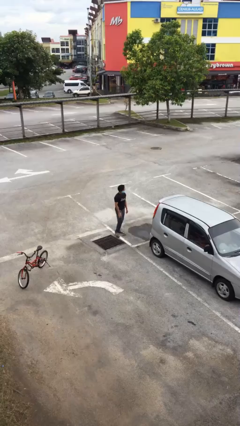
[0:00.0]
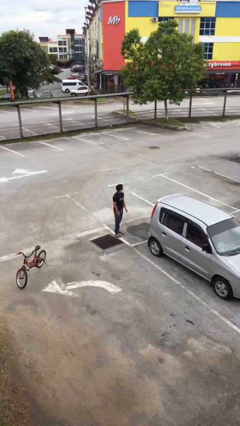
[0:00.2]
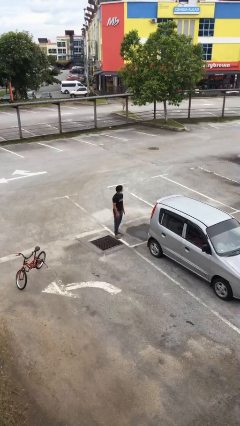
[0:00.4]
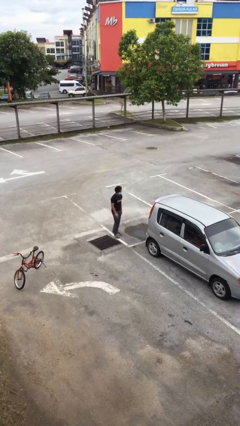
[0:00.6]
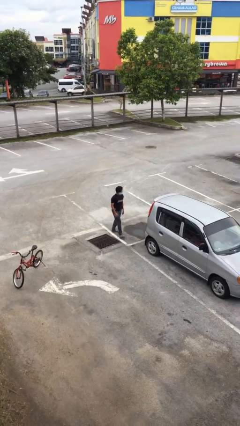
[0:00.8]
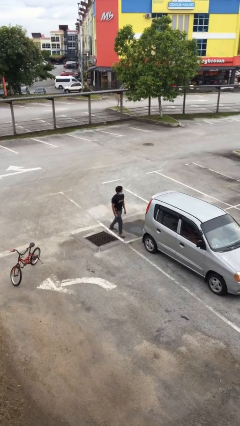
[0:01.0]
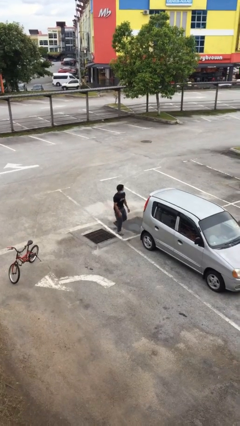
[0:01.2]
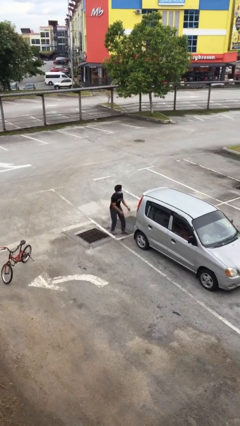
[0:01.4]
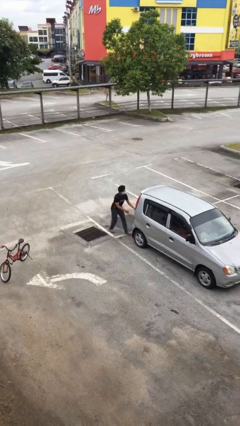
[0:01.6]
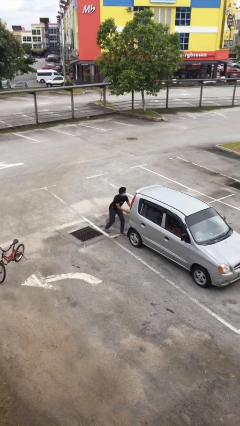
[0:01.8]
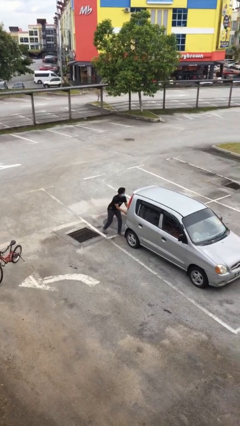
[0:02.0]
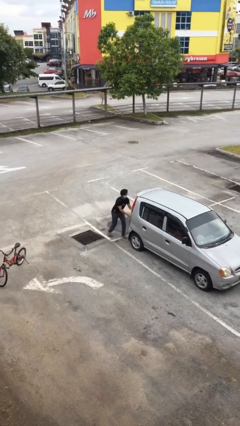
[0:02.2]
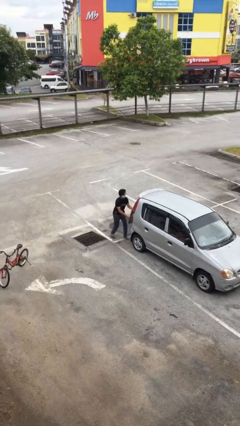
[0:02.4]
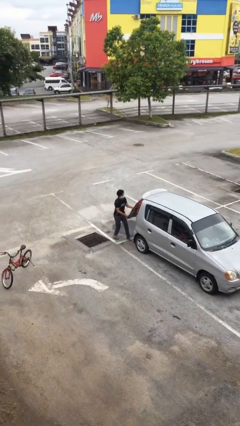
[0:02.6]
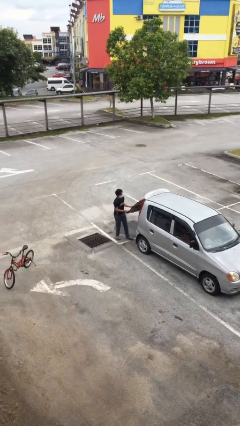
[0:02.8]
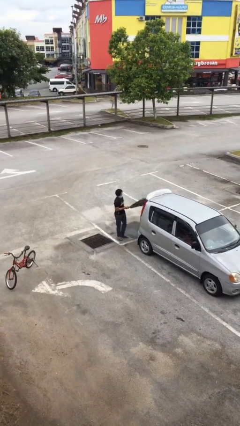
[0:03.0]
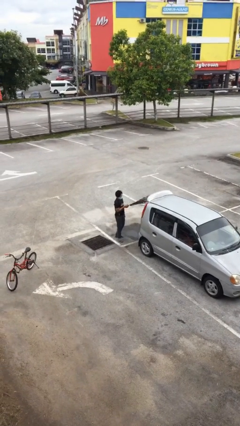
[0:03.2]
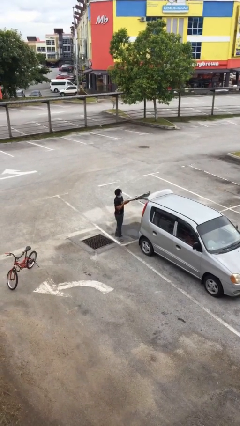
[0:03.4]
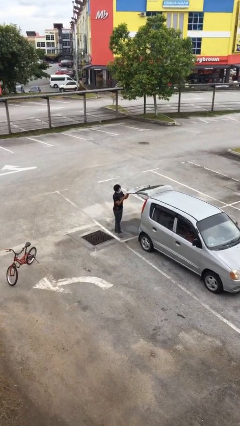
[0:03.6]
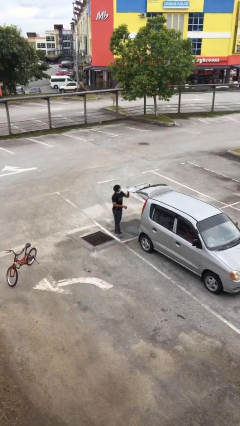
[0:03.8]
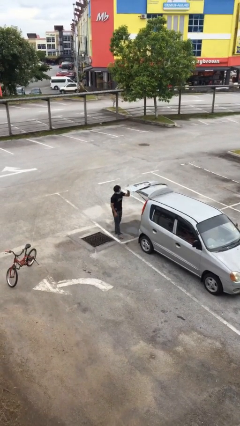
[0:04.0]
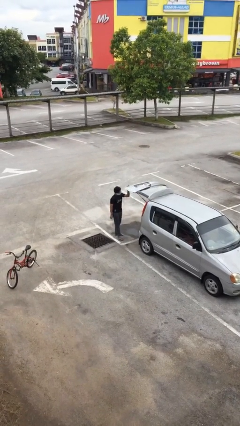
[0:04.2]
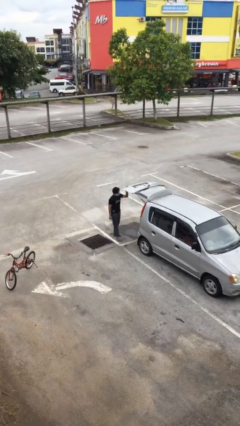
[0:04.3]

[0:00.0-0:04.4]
person opens car trunk

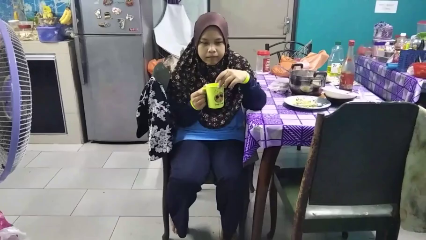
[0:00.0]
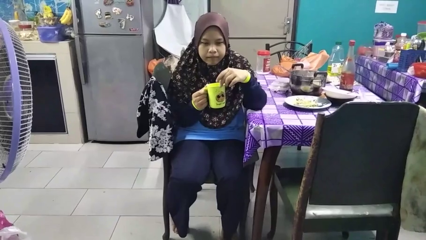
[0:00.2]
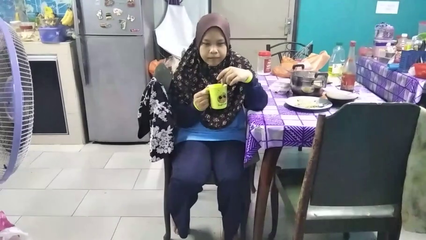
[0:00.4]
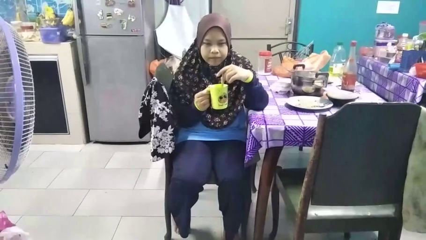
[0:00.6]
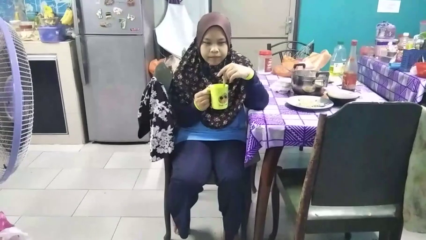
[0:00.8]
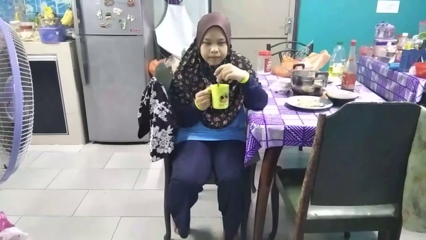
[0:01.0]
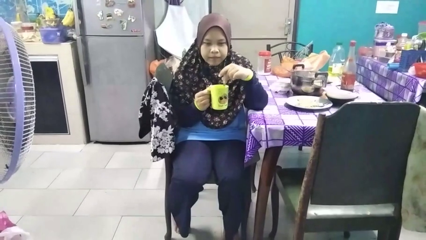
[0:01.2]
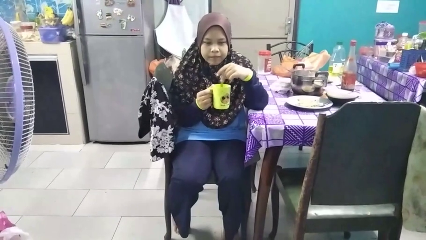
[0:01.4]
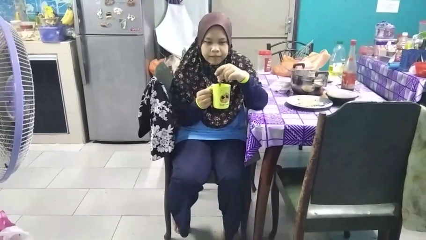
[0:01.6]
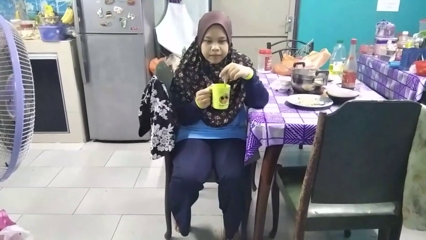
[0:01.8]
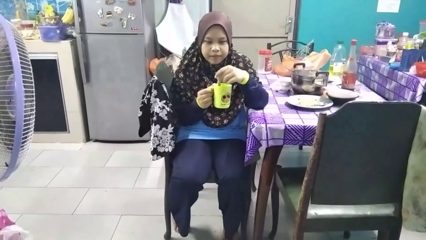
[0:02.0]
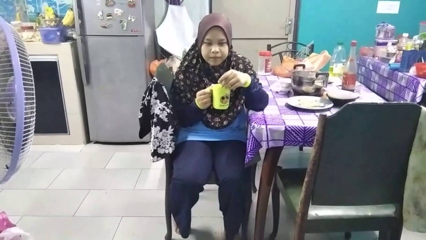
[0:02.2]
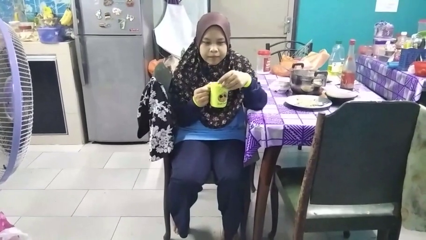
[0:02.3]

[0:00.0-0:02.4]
person stirs mug

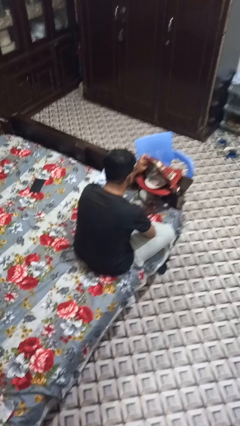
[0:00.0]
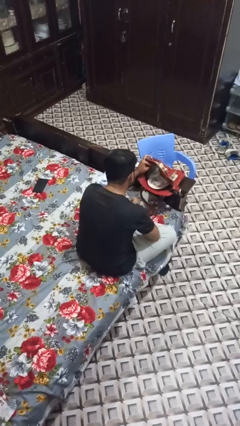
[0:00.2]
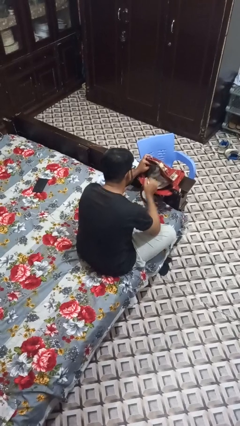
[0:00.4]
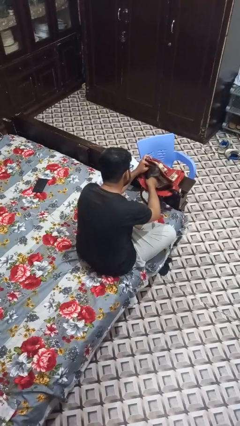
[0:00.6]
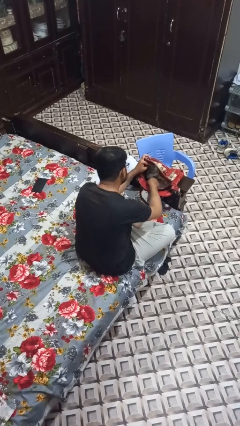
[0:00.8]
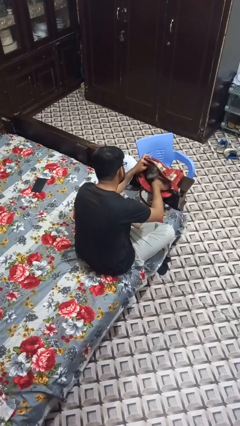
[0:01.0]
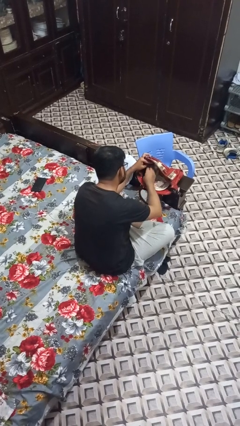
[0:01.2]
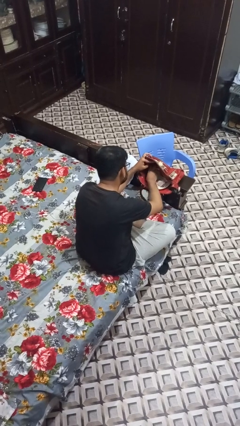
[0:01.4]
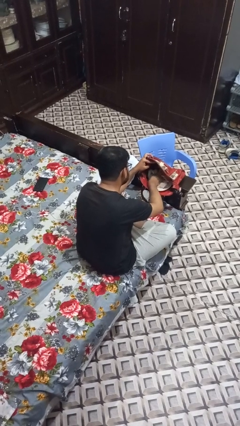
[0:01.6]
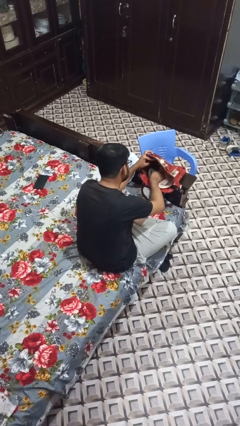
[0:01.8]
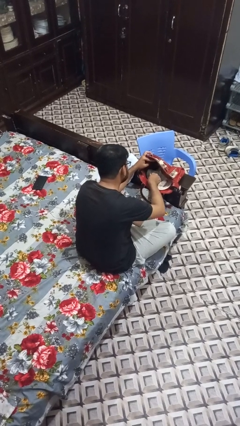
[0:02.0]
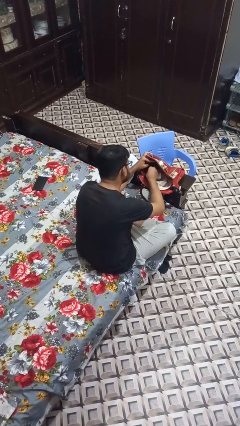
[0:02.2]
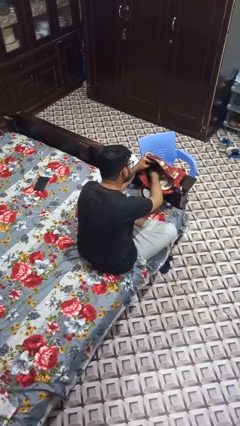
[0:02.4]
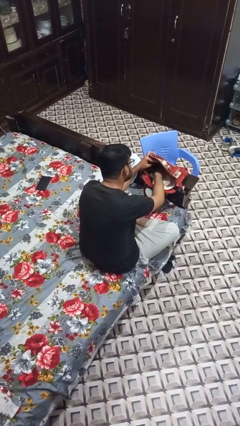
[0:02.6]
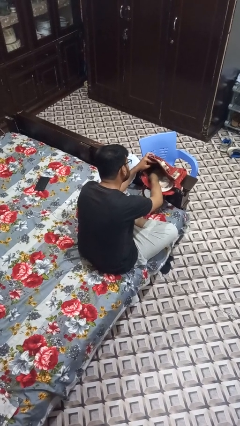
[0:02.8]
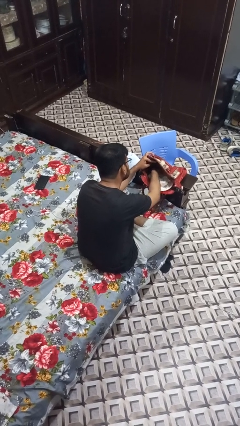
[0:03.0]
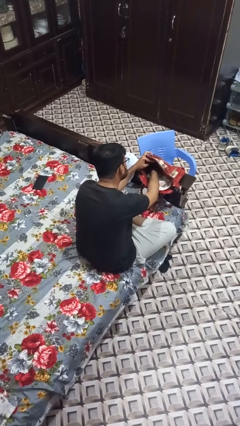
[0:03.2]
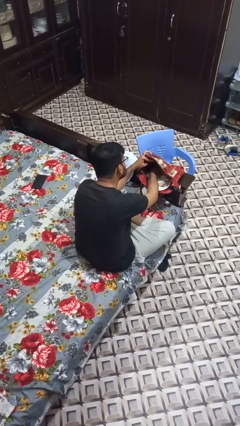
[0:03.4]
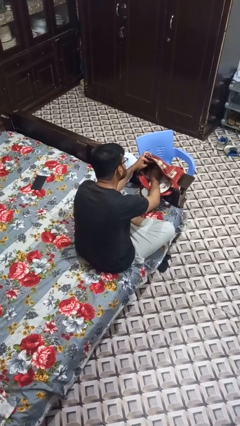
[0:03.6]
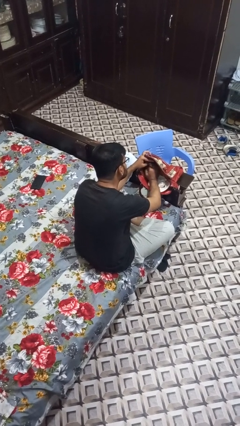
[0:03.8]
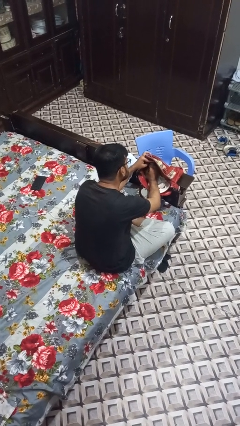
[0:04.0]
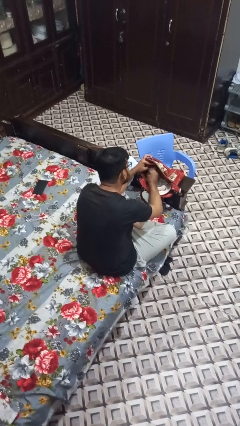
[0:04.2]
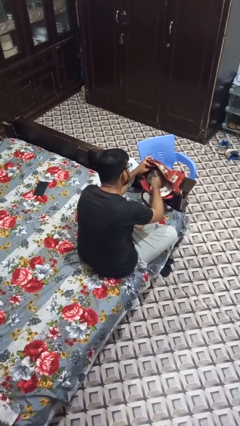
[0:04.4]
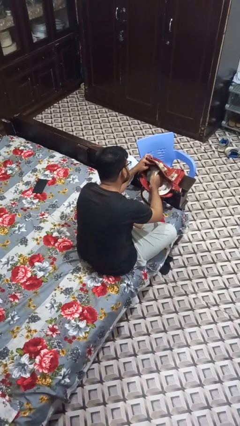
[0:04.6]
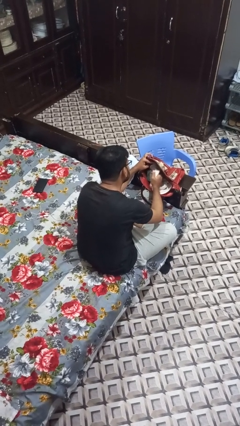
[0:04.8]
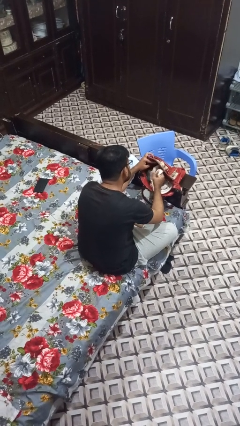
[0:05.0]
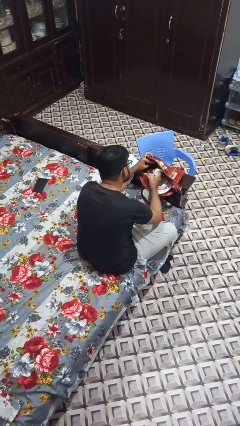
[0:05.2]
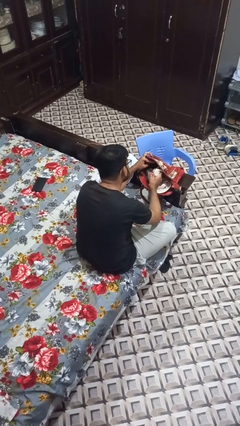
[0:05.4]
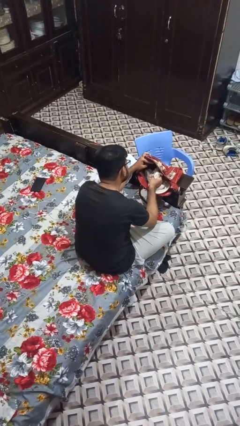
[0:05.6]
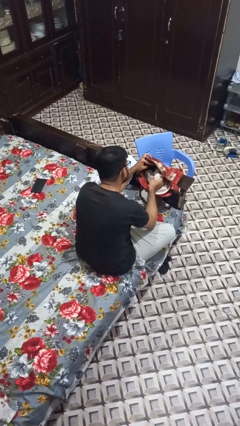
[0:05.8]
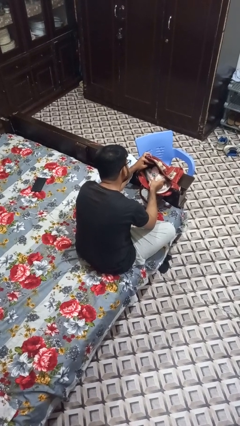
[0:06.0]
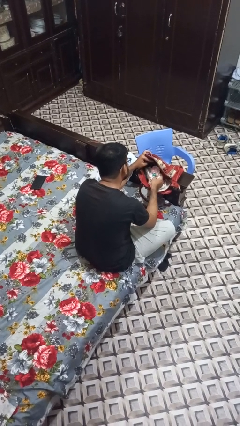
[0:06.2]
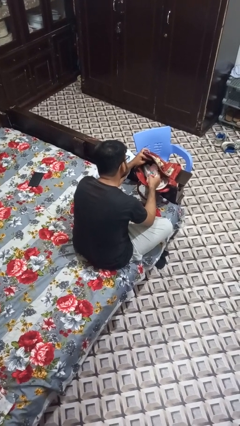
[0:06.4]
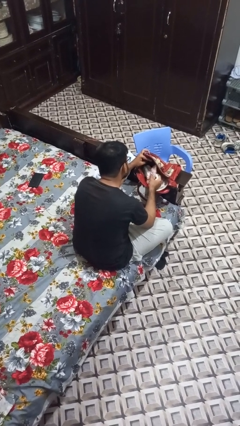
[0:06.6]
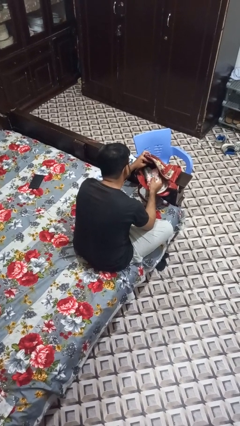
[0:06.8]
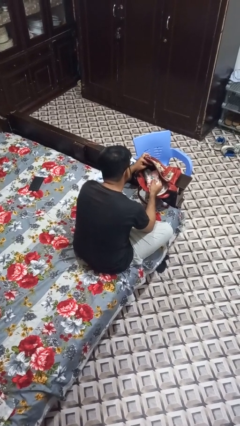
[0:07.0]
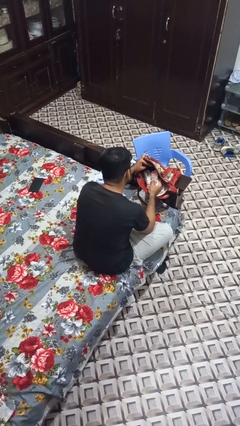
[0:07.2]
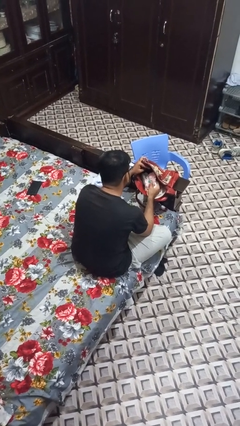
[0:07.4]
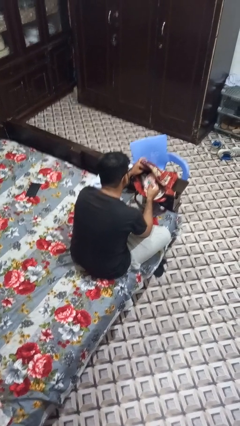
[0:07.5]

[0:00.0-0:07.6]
person searches in purse

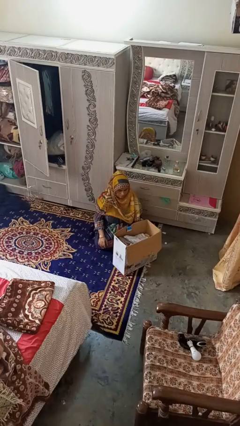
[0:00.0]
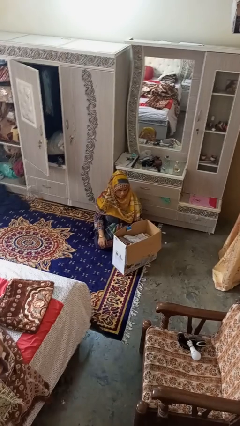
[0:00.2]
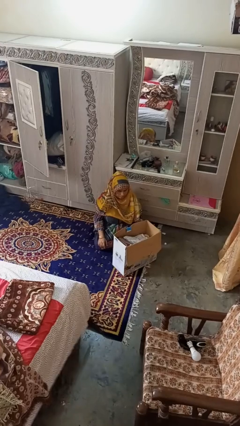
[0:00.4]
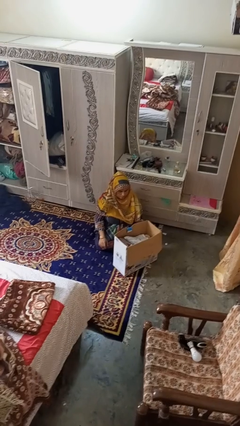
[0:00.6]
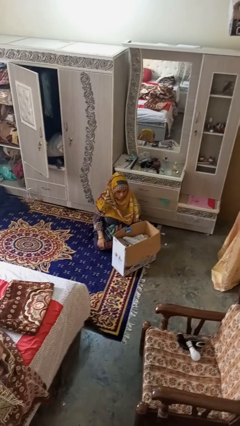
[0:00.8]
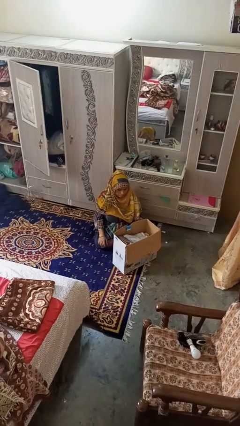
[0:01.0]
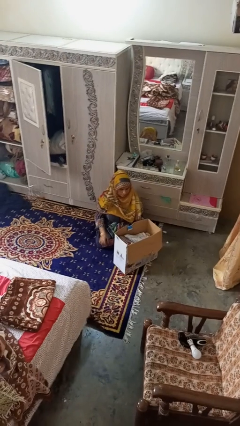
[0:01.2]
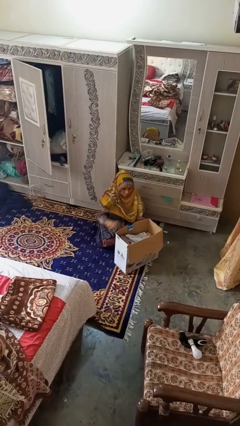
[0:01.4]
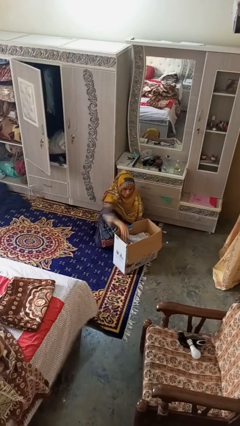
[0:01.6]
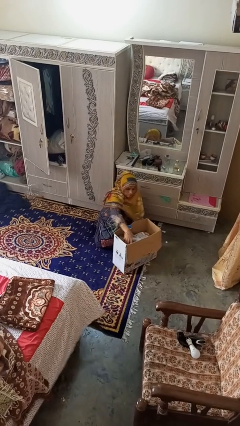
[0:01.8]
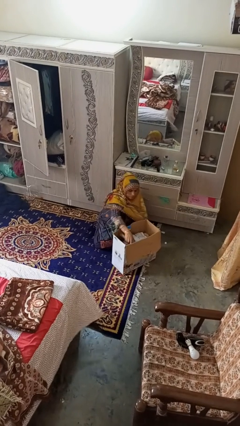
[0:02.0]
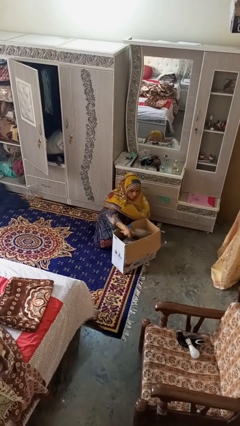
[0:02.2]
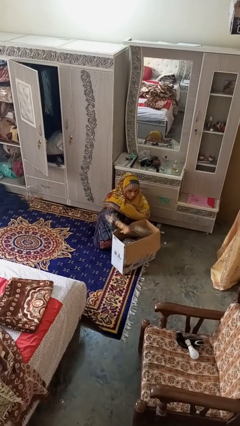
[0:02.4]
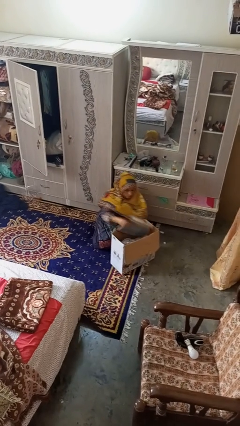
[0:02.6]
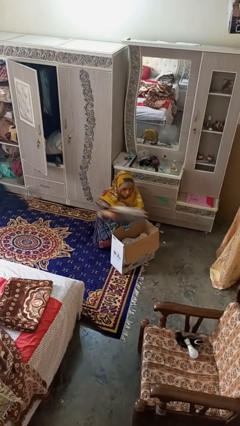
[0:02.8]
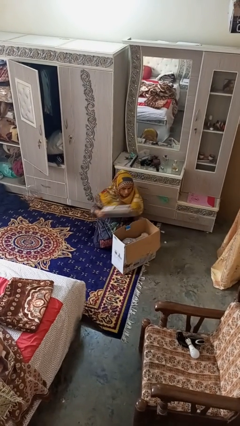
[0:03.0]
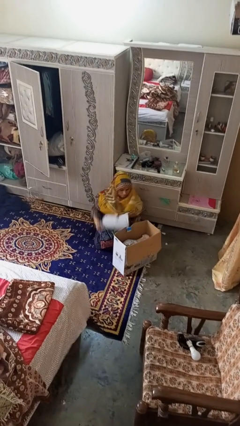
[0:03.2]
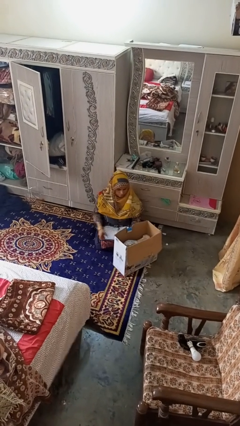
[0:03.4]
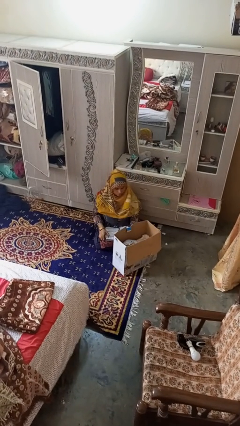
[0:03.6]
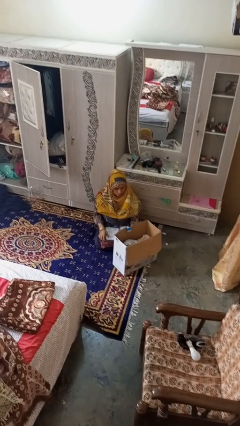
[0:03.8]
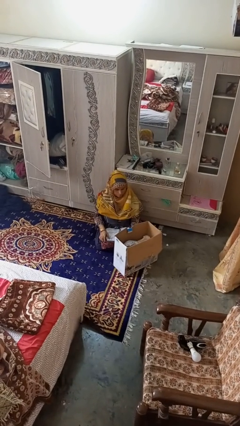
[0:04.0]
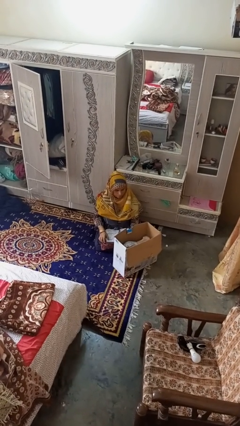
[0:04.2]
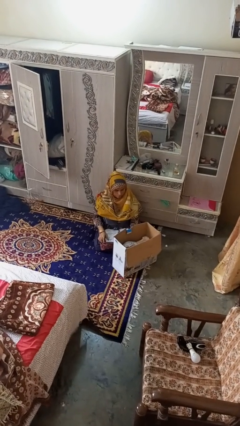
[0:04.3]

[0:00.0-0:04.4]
person takes object from box
